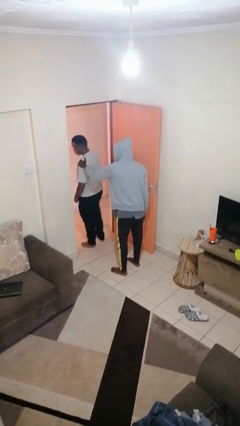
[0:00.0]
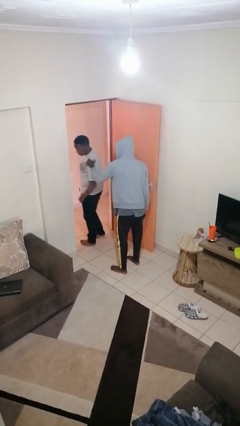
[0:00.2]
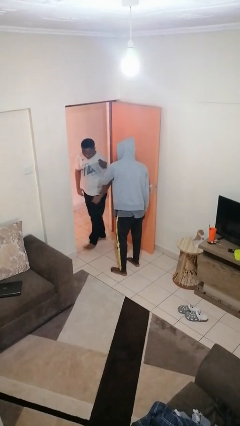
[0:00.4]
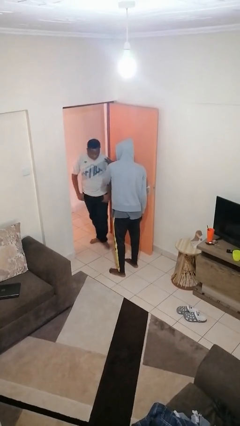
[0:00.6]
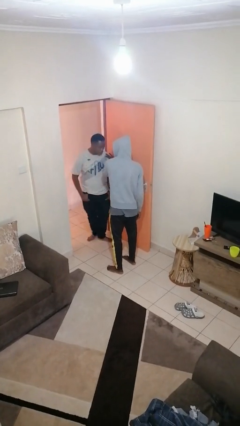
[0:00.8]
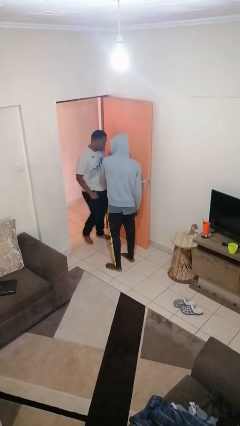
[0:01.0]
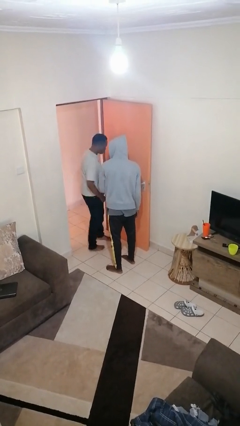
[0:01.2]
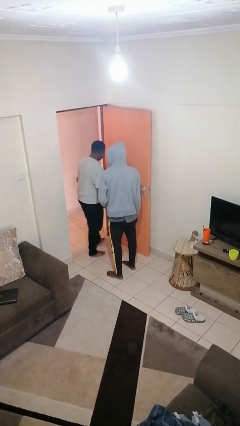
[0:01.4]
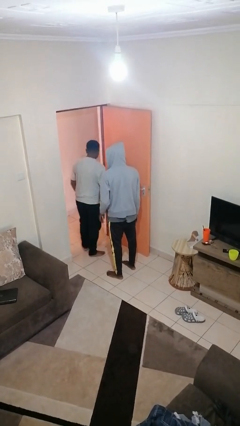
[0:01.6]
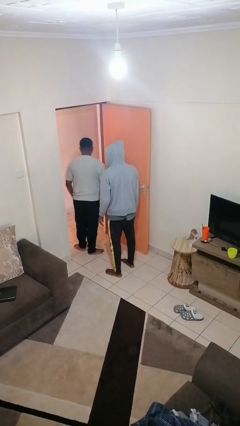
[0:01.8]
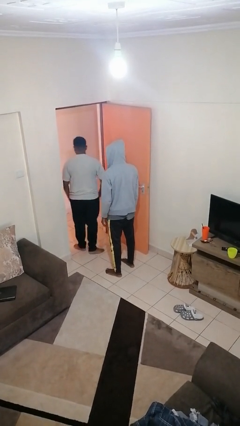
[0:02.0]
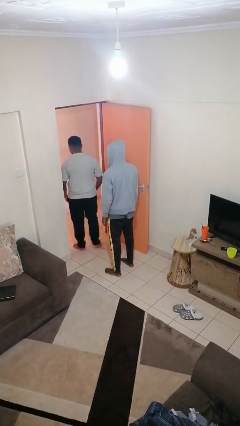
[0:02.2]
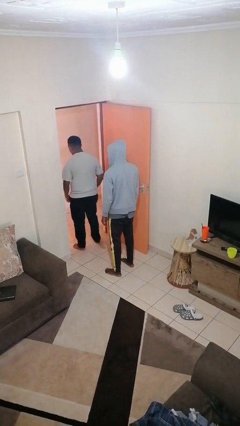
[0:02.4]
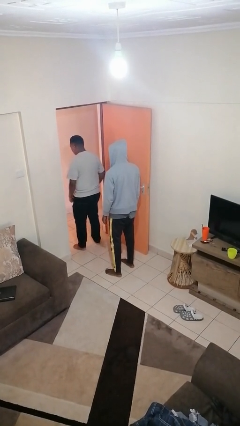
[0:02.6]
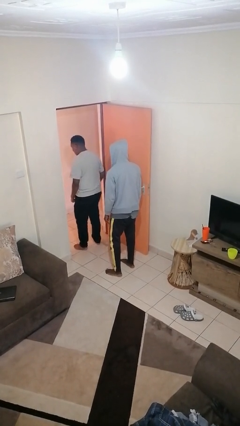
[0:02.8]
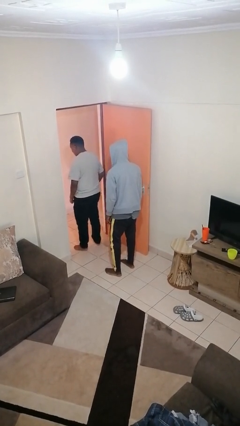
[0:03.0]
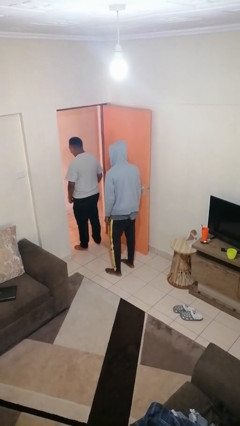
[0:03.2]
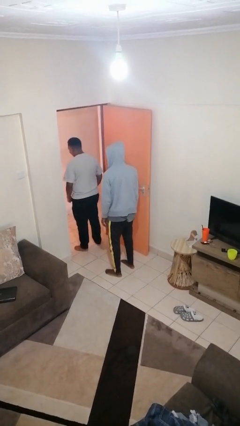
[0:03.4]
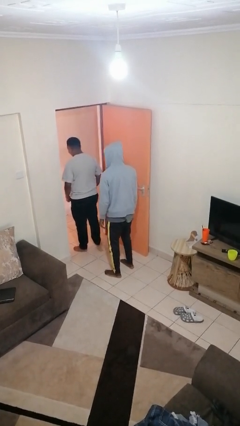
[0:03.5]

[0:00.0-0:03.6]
person spins person around

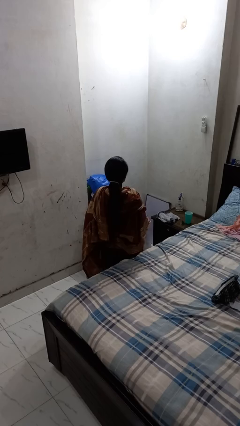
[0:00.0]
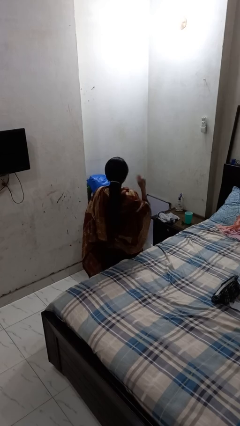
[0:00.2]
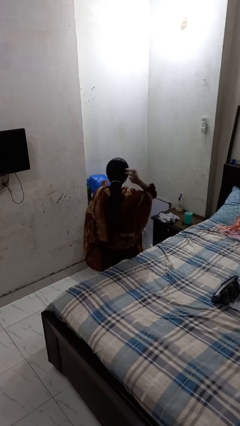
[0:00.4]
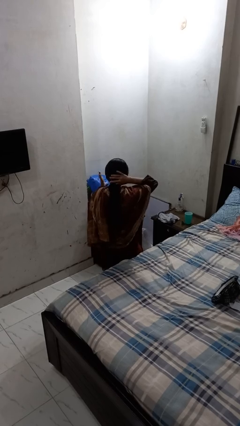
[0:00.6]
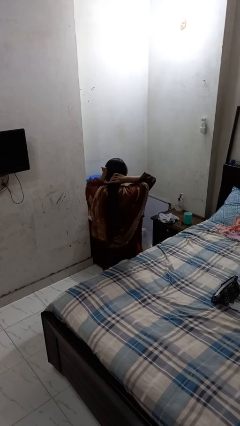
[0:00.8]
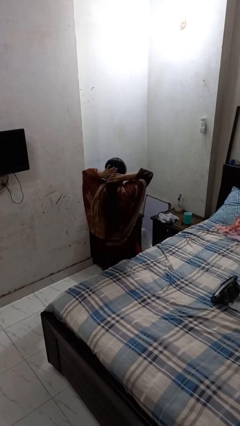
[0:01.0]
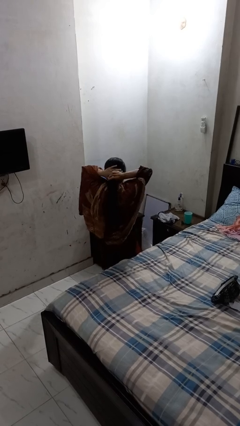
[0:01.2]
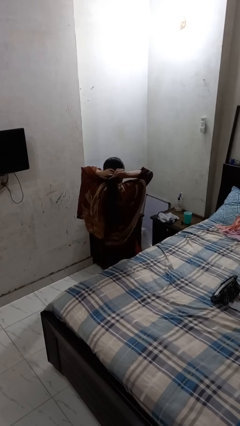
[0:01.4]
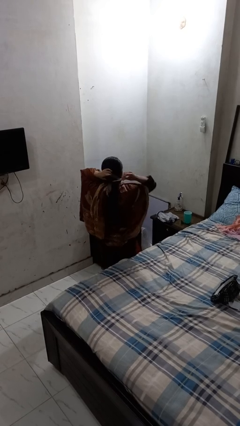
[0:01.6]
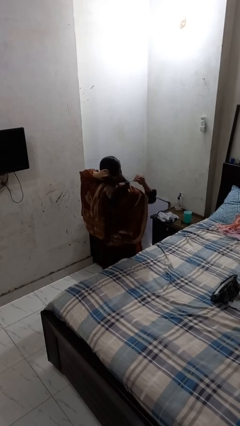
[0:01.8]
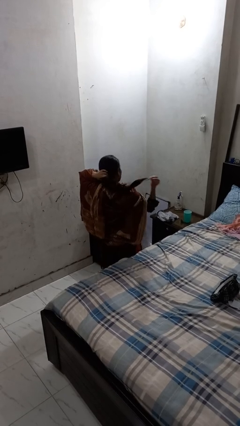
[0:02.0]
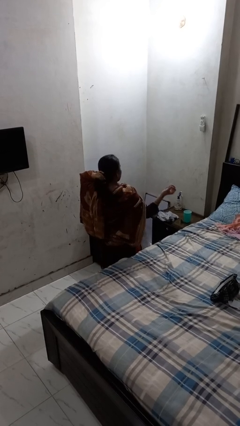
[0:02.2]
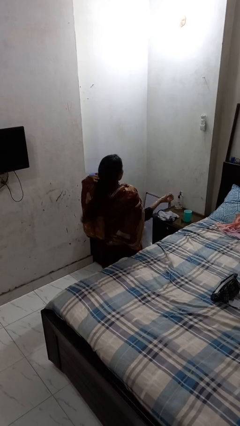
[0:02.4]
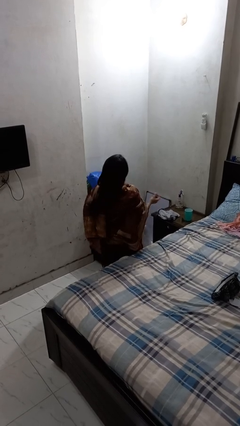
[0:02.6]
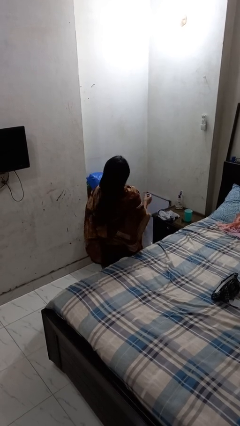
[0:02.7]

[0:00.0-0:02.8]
person takes off hairtie

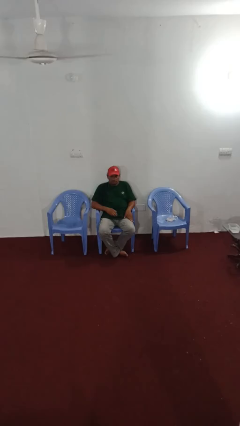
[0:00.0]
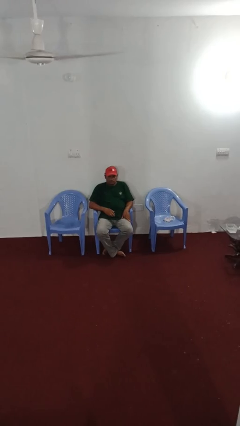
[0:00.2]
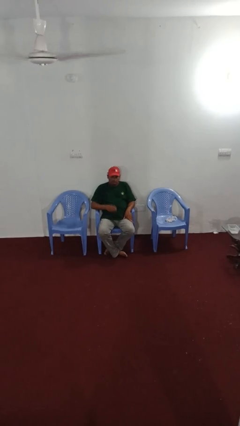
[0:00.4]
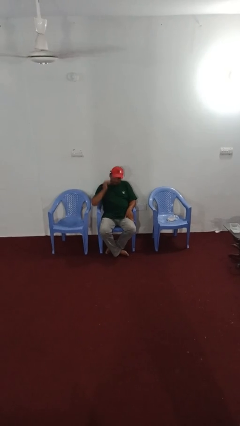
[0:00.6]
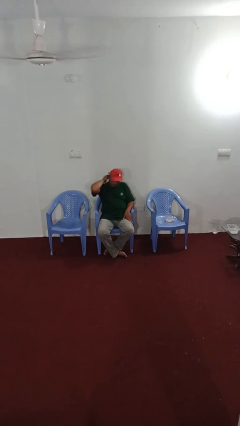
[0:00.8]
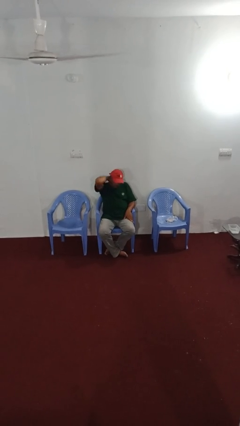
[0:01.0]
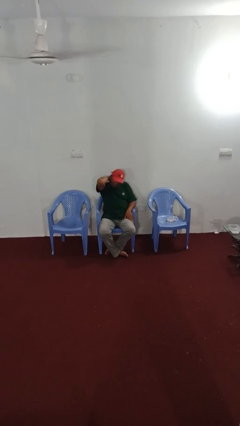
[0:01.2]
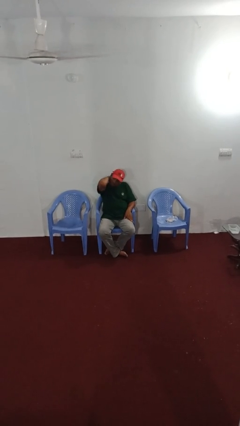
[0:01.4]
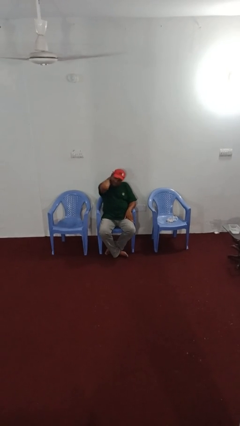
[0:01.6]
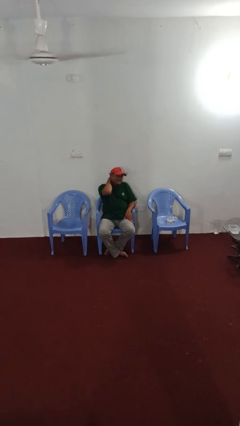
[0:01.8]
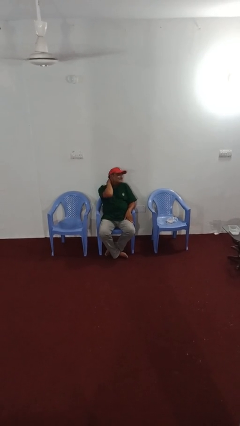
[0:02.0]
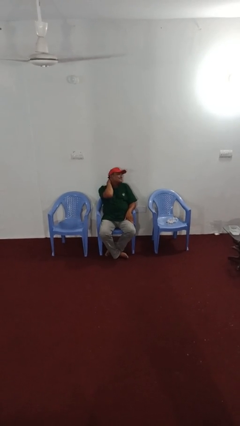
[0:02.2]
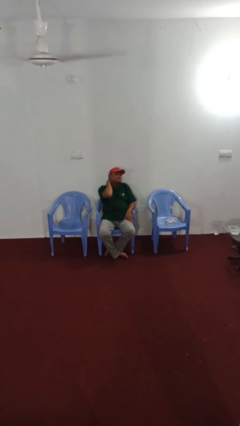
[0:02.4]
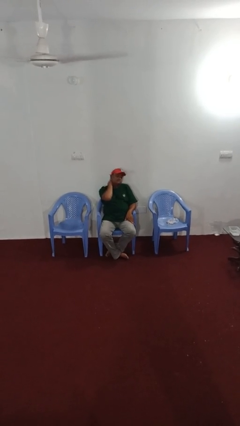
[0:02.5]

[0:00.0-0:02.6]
person rubs neck

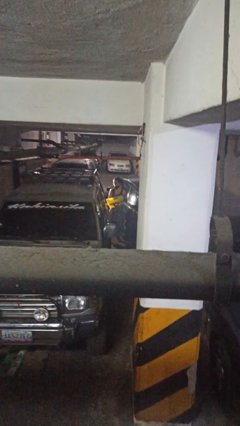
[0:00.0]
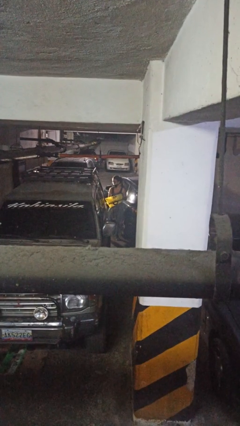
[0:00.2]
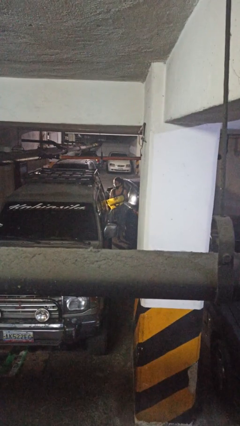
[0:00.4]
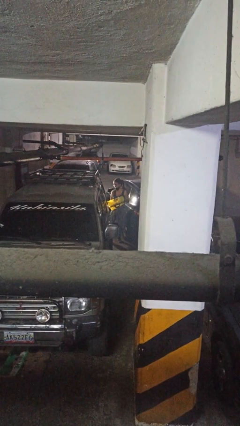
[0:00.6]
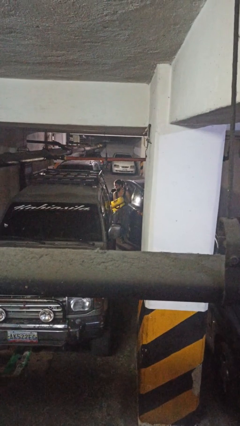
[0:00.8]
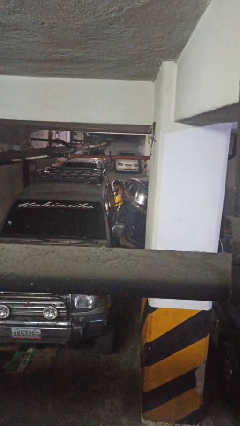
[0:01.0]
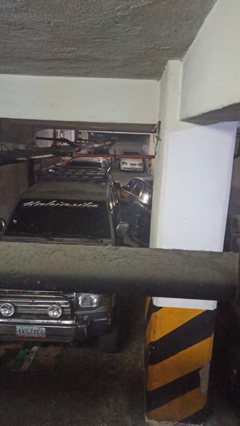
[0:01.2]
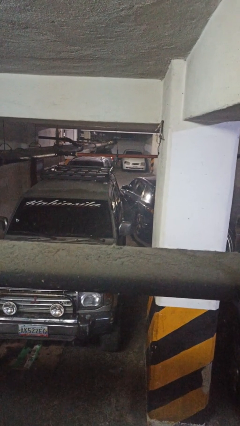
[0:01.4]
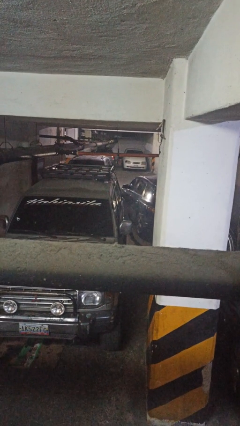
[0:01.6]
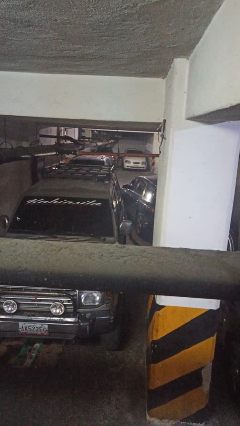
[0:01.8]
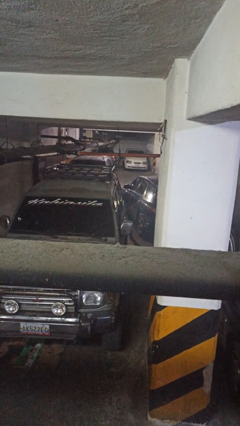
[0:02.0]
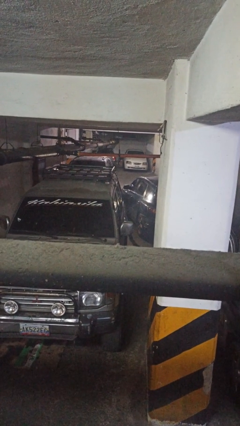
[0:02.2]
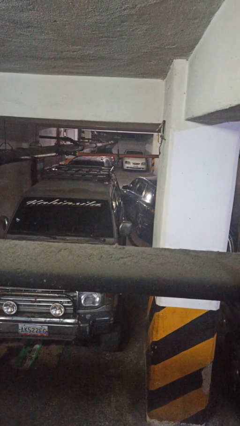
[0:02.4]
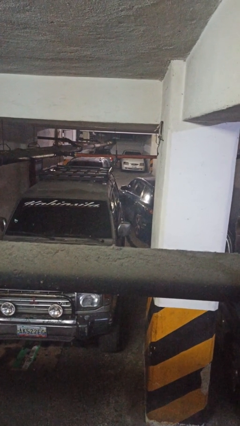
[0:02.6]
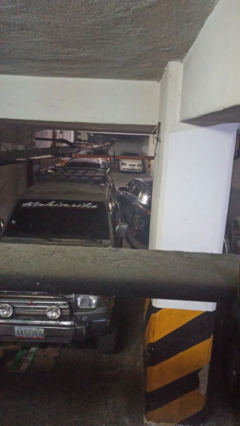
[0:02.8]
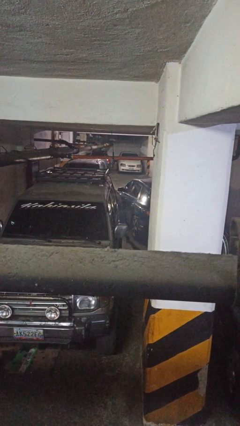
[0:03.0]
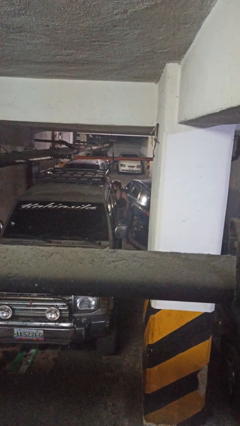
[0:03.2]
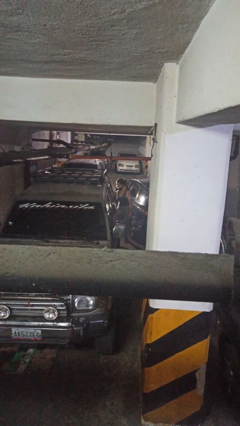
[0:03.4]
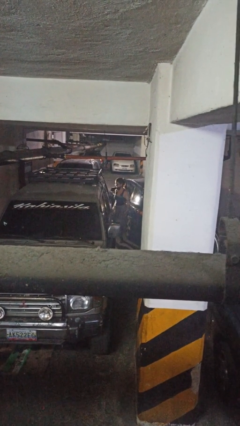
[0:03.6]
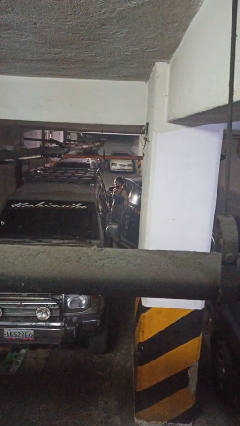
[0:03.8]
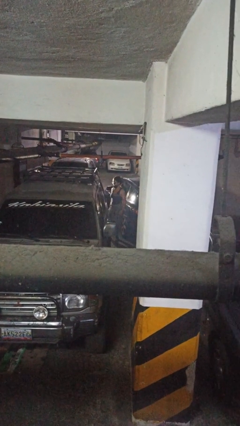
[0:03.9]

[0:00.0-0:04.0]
person loads car

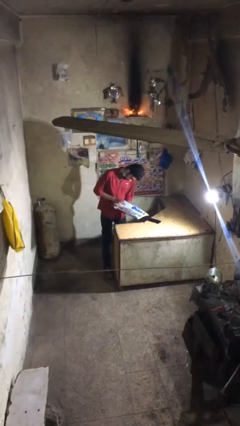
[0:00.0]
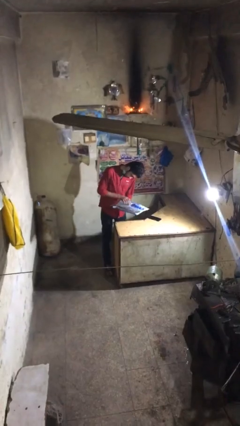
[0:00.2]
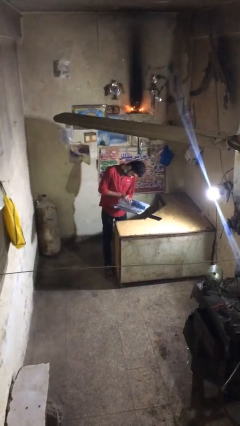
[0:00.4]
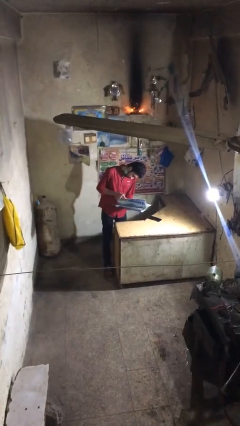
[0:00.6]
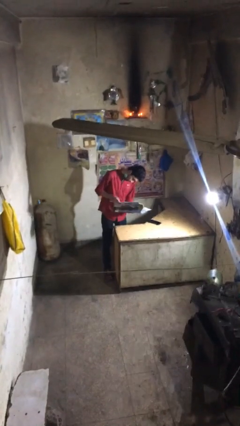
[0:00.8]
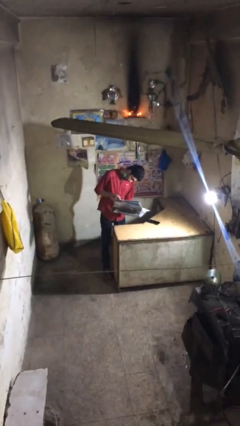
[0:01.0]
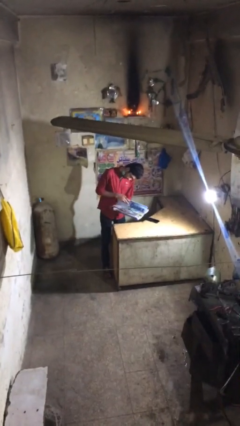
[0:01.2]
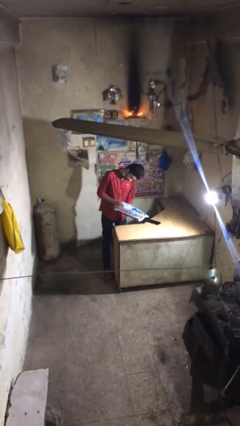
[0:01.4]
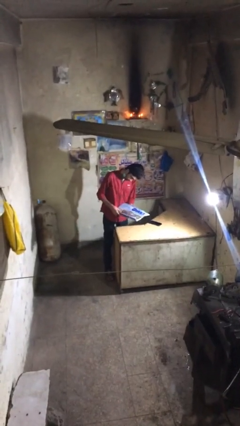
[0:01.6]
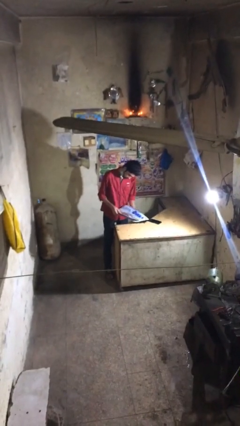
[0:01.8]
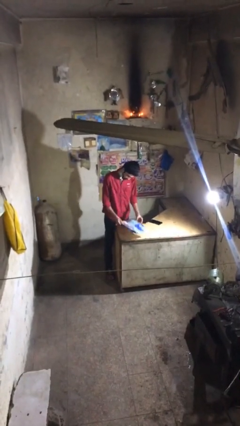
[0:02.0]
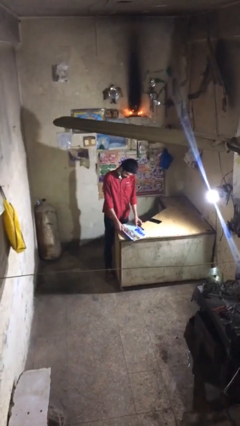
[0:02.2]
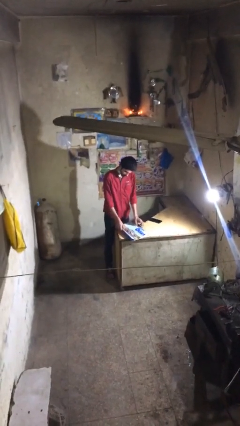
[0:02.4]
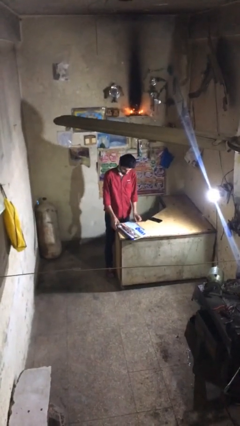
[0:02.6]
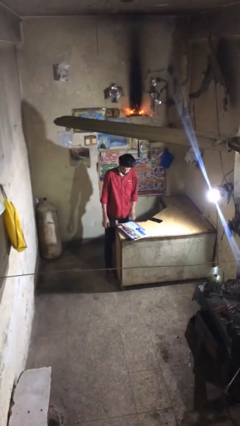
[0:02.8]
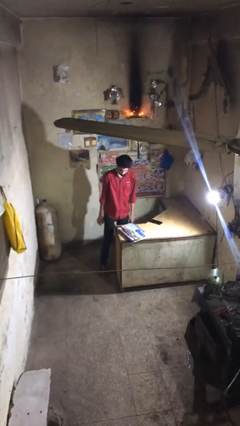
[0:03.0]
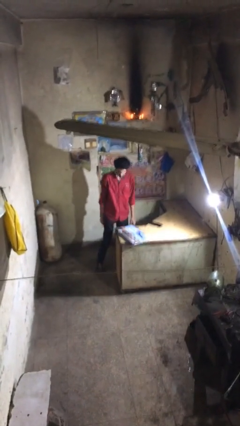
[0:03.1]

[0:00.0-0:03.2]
person puts down object on table

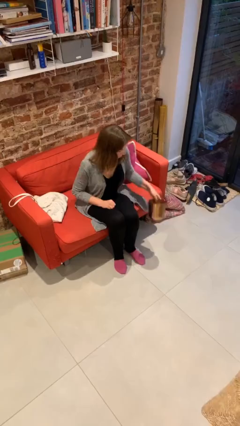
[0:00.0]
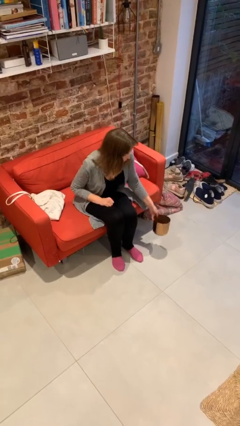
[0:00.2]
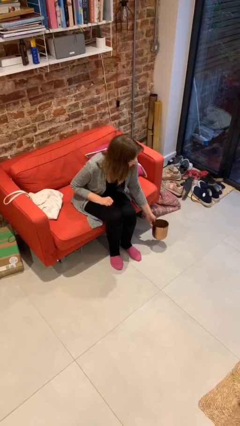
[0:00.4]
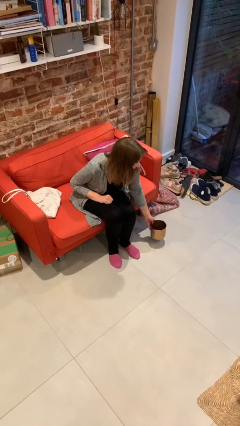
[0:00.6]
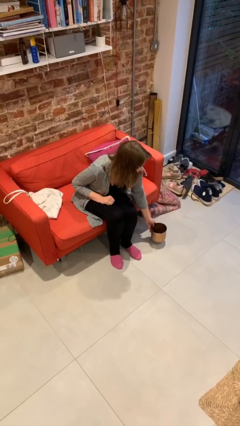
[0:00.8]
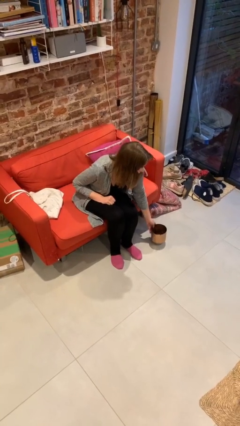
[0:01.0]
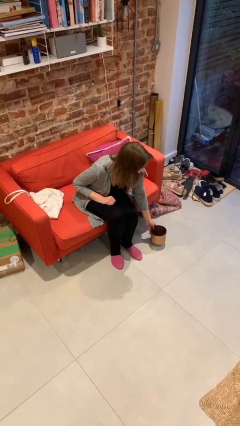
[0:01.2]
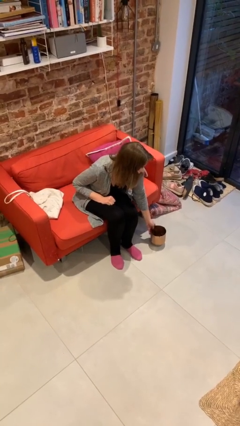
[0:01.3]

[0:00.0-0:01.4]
person puts down object on floor
